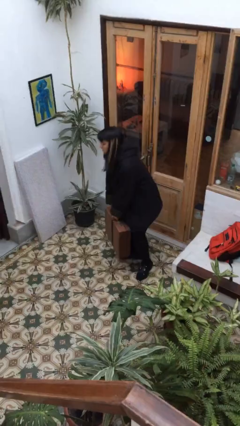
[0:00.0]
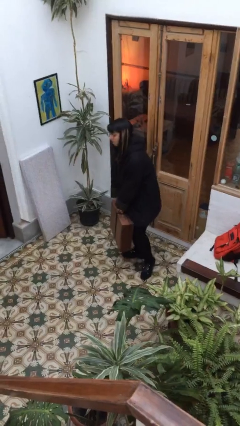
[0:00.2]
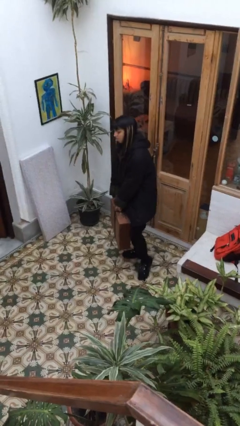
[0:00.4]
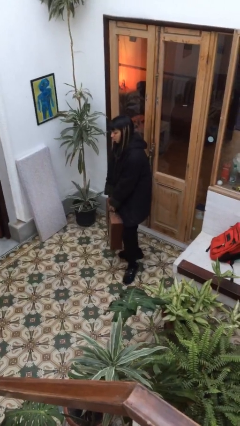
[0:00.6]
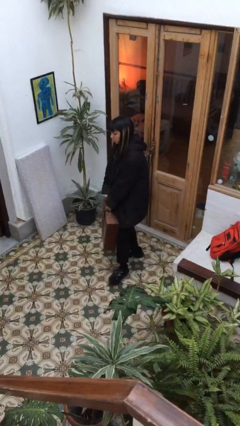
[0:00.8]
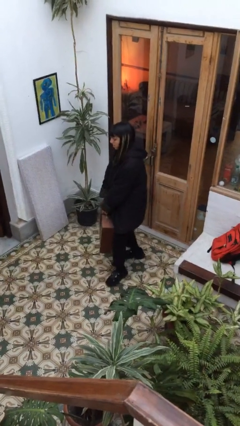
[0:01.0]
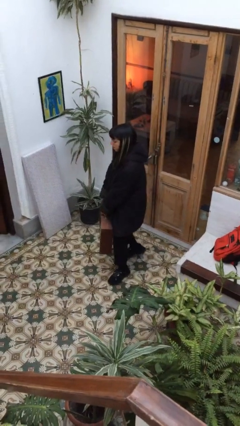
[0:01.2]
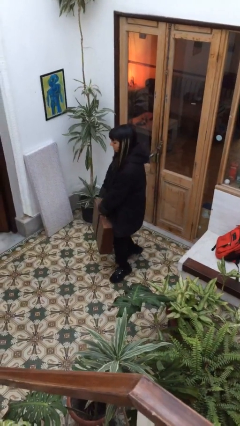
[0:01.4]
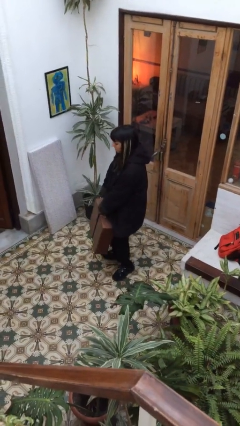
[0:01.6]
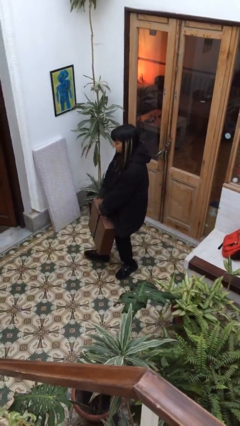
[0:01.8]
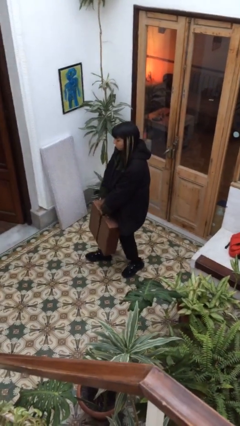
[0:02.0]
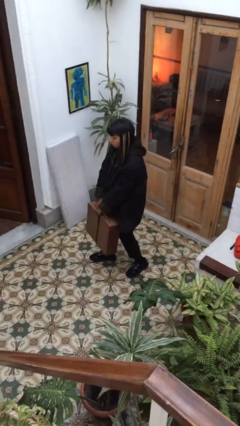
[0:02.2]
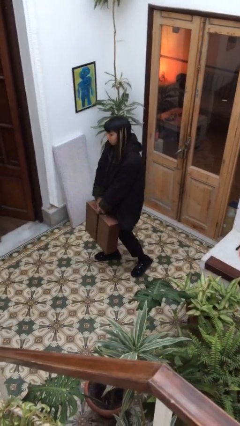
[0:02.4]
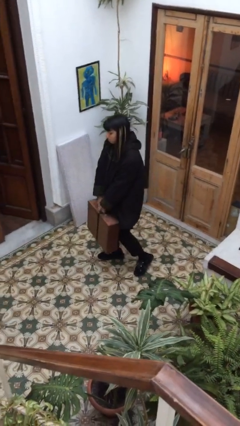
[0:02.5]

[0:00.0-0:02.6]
person carries heavy object

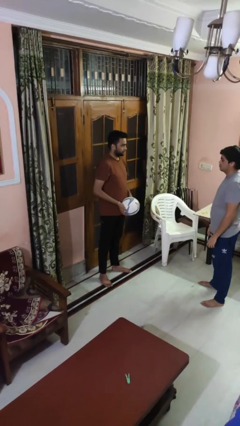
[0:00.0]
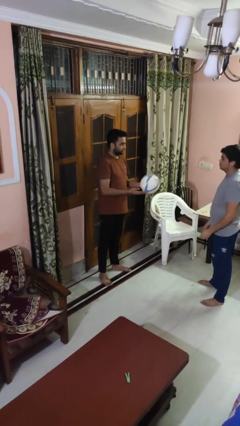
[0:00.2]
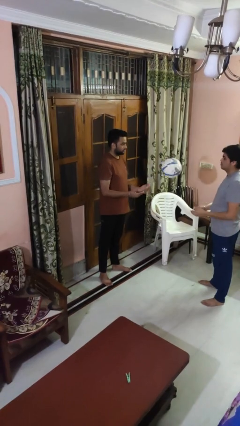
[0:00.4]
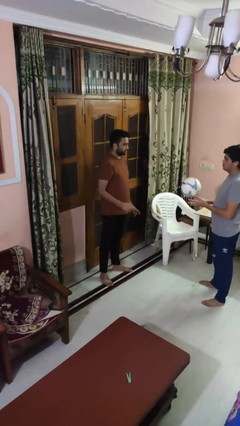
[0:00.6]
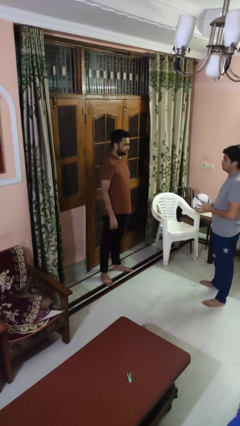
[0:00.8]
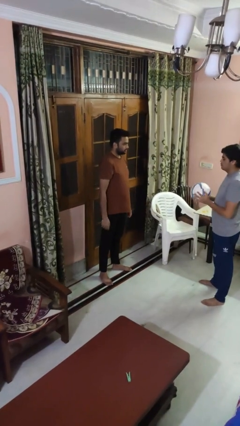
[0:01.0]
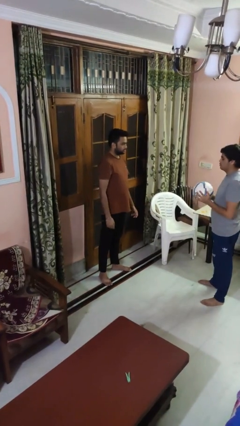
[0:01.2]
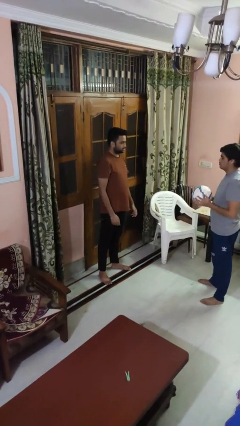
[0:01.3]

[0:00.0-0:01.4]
person throws object to person

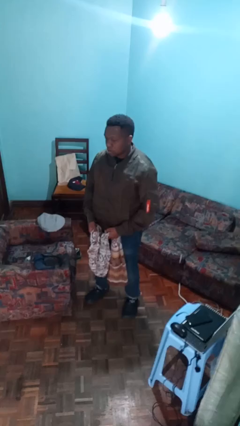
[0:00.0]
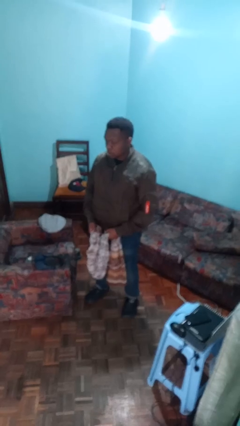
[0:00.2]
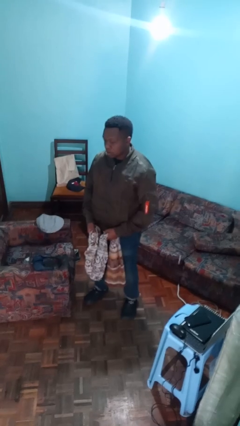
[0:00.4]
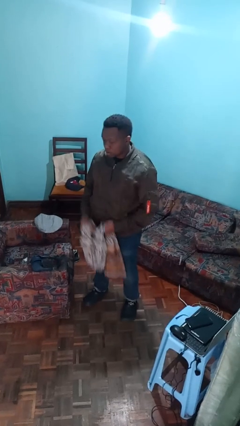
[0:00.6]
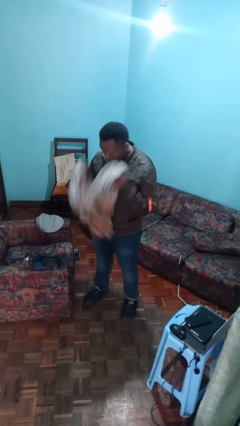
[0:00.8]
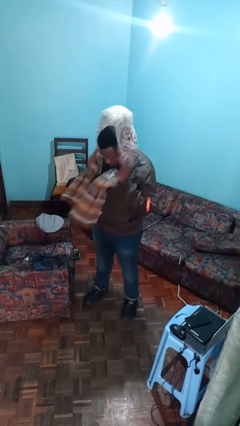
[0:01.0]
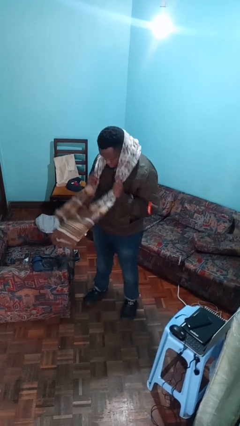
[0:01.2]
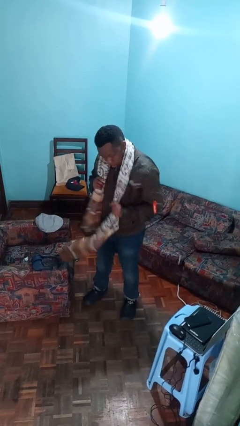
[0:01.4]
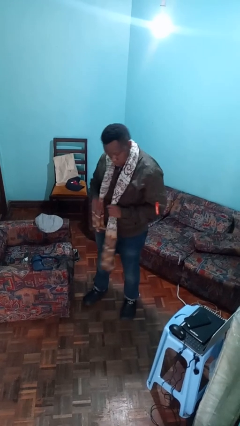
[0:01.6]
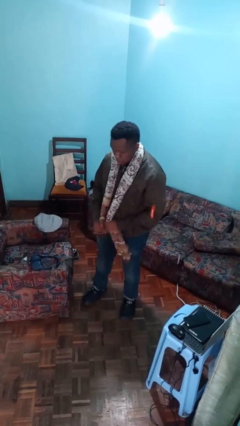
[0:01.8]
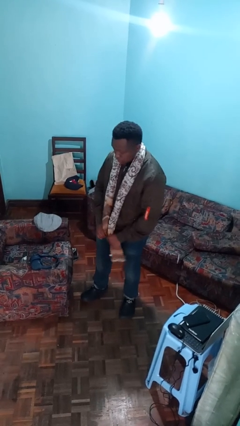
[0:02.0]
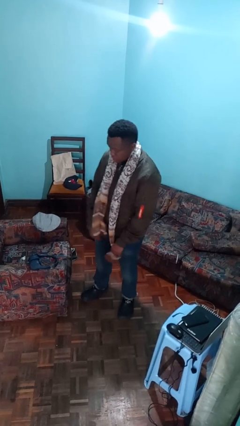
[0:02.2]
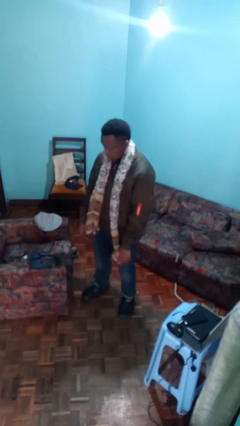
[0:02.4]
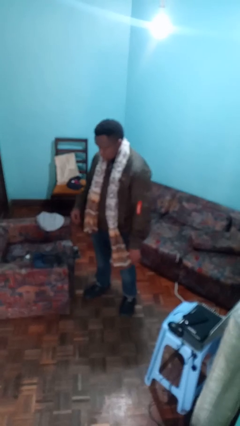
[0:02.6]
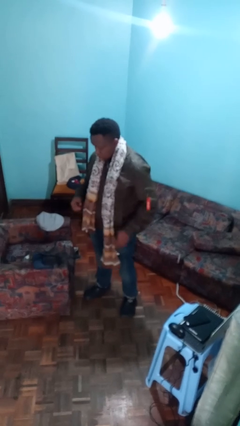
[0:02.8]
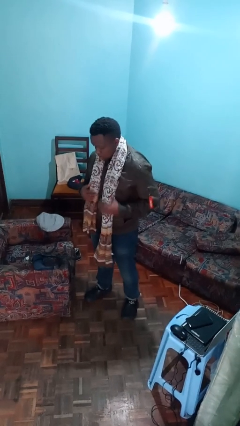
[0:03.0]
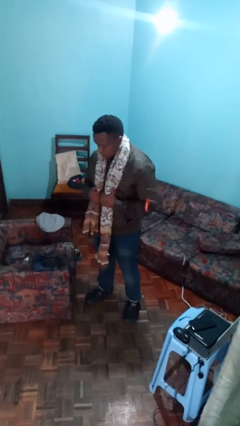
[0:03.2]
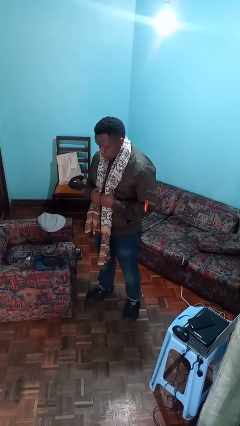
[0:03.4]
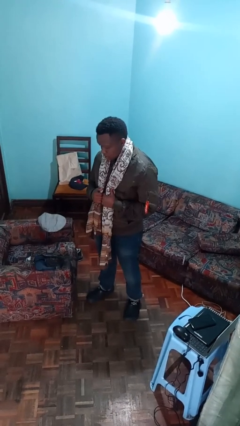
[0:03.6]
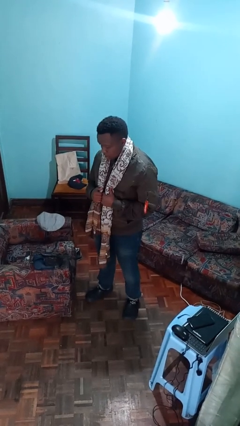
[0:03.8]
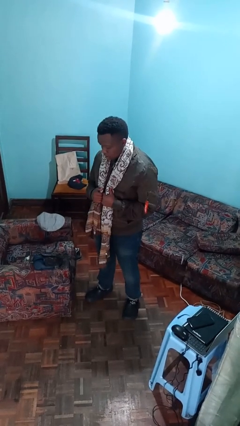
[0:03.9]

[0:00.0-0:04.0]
person puts on scarf

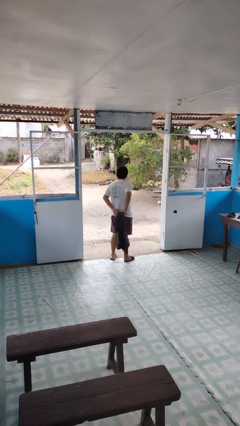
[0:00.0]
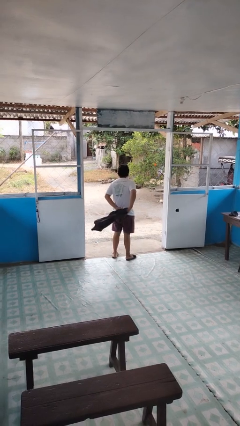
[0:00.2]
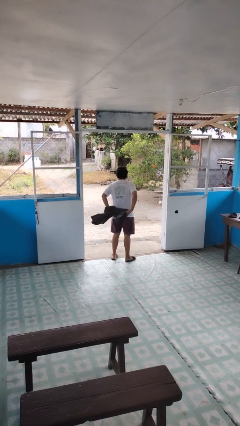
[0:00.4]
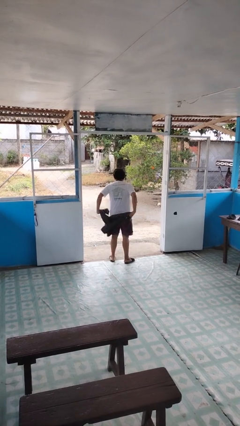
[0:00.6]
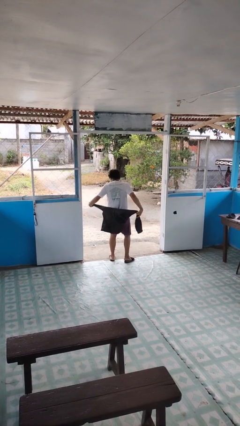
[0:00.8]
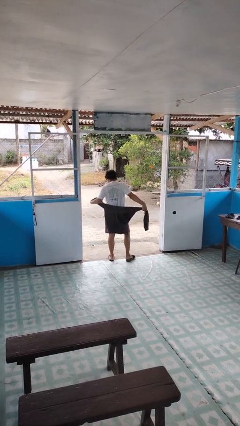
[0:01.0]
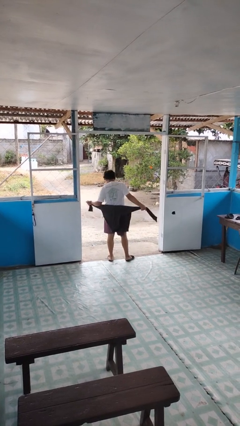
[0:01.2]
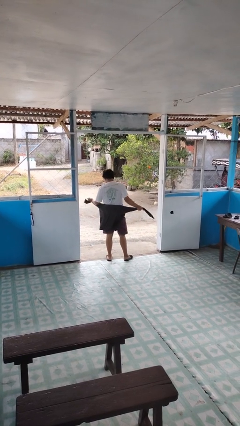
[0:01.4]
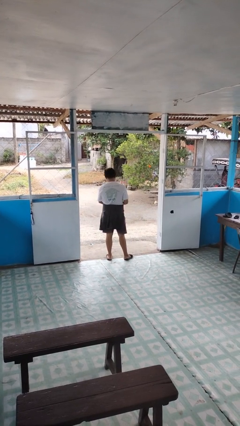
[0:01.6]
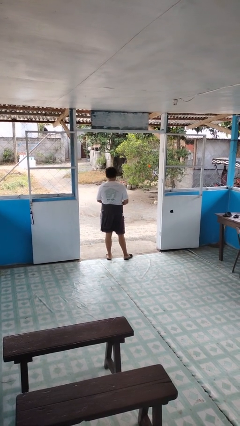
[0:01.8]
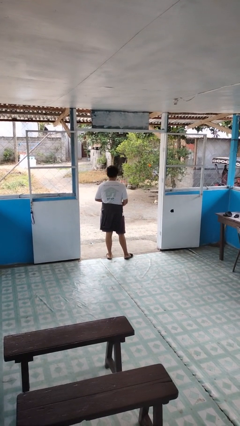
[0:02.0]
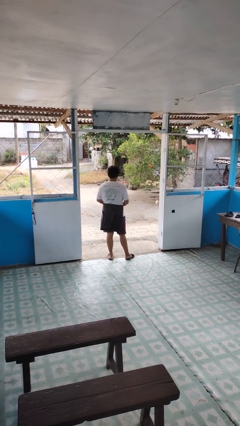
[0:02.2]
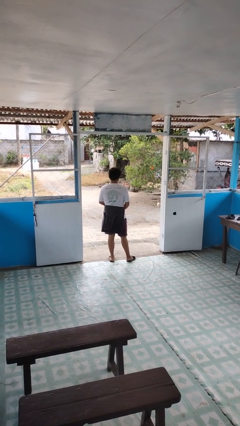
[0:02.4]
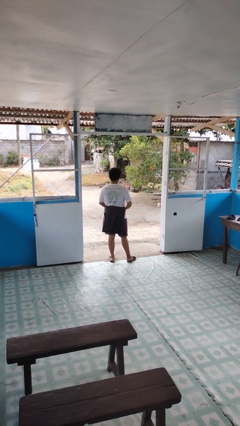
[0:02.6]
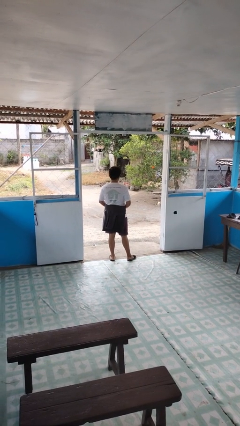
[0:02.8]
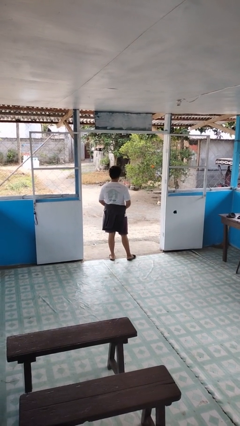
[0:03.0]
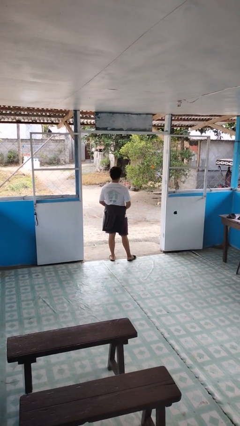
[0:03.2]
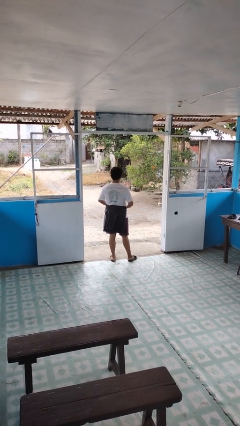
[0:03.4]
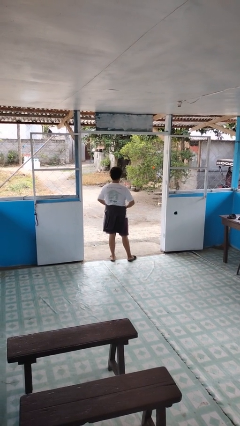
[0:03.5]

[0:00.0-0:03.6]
person ties jacket around waist

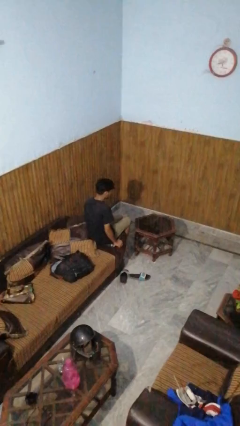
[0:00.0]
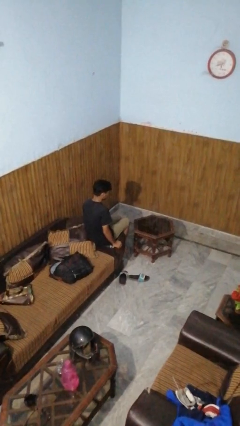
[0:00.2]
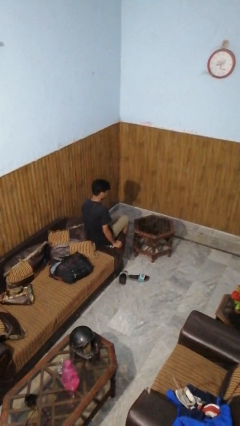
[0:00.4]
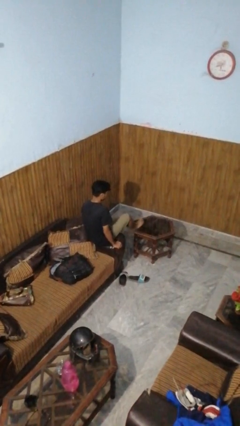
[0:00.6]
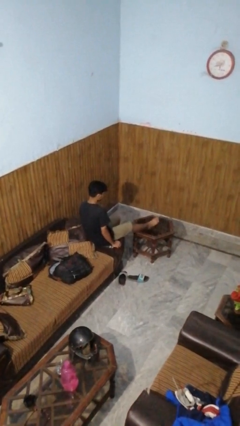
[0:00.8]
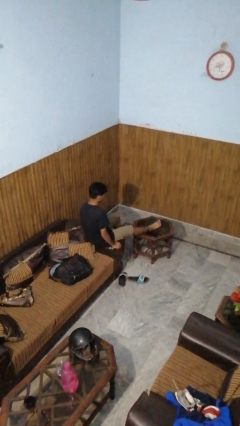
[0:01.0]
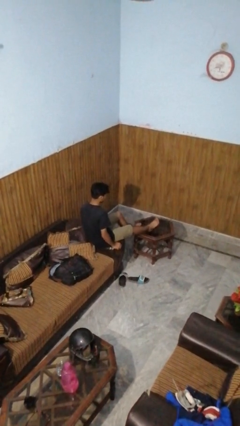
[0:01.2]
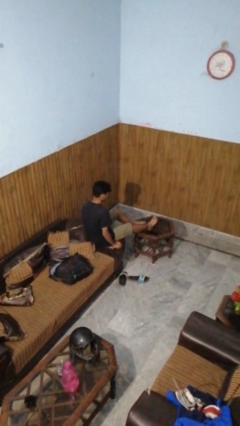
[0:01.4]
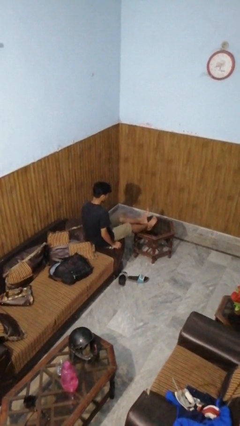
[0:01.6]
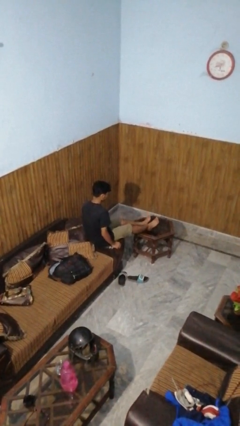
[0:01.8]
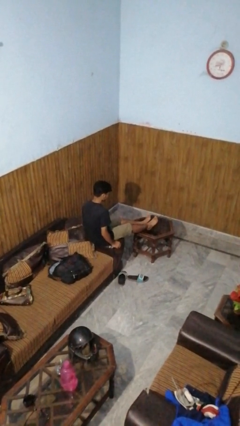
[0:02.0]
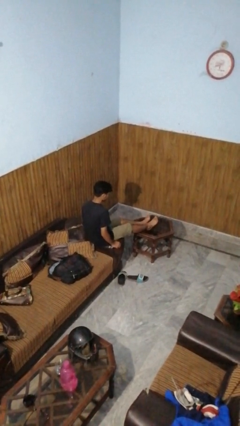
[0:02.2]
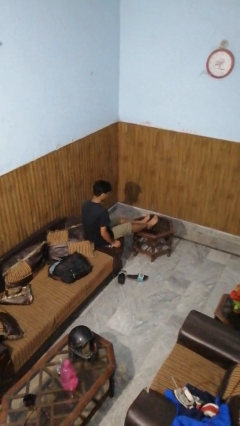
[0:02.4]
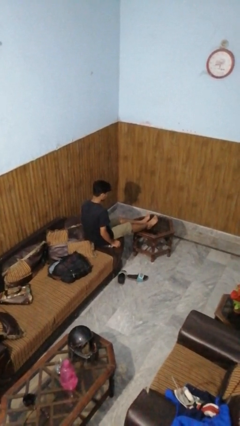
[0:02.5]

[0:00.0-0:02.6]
person puts feet up

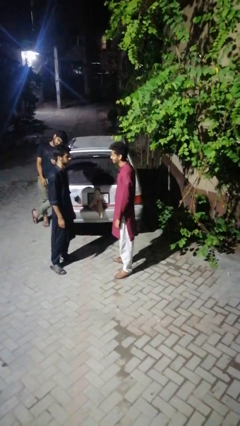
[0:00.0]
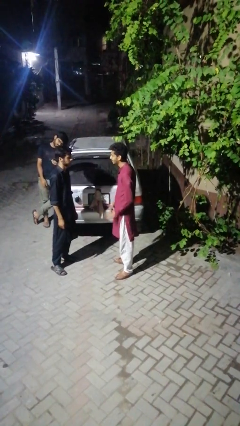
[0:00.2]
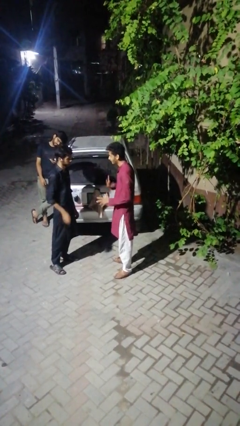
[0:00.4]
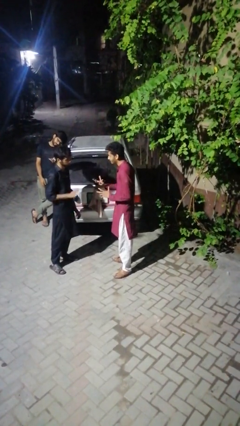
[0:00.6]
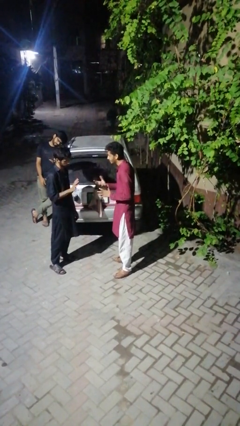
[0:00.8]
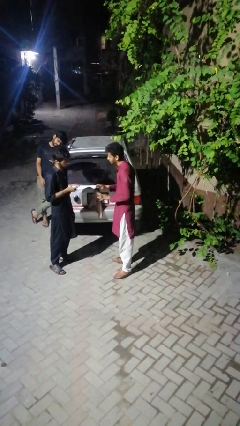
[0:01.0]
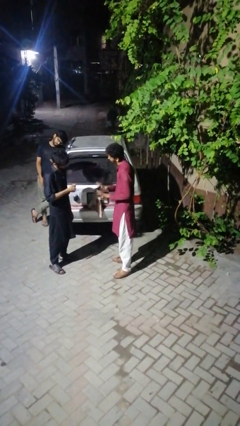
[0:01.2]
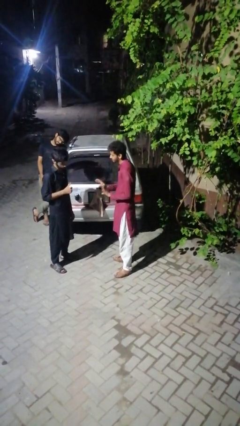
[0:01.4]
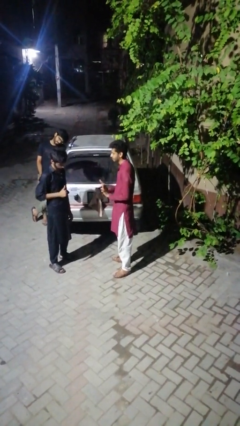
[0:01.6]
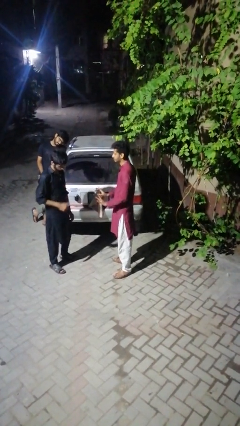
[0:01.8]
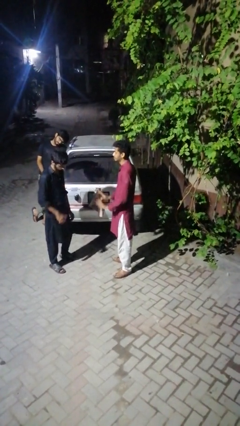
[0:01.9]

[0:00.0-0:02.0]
person talks to person

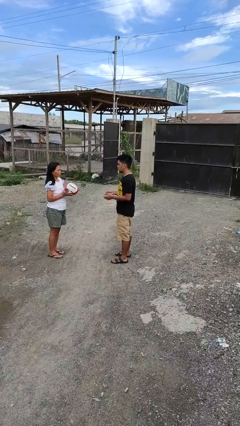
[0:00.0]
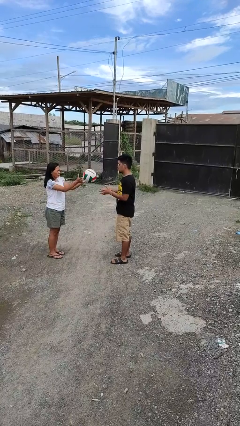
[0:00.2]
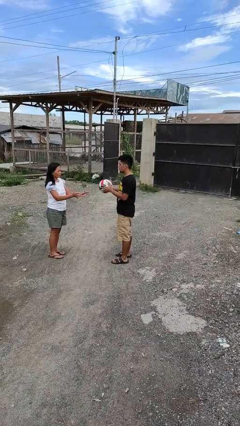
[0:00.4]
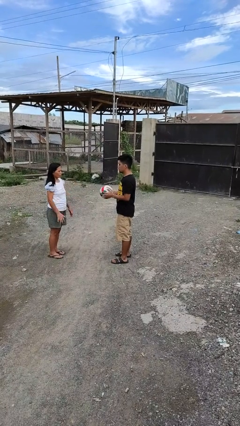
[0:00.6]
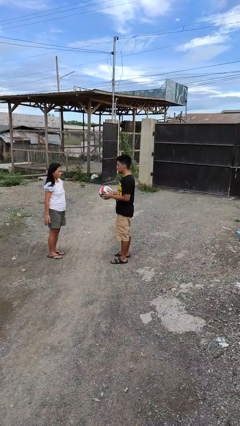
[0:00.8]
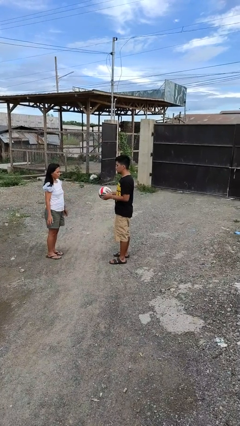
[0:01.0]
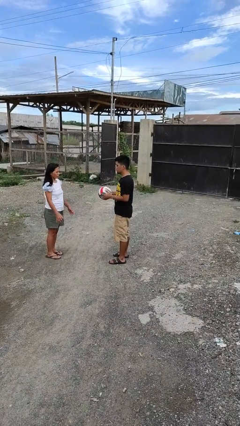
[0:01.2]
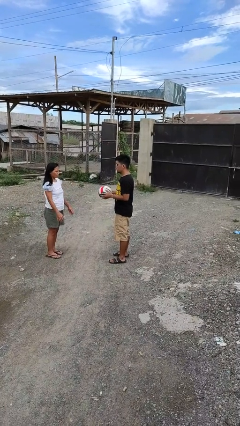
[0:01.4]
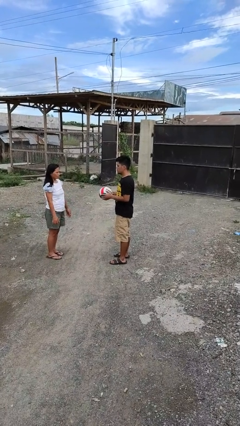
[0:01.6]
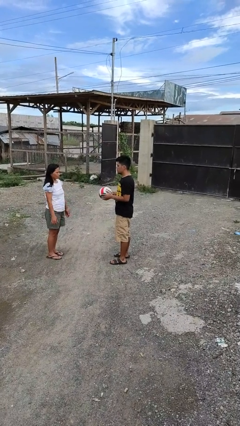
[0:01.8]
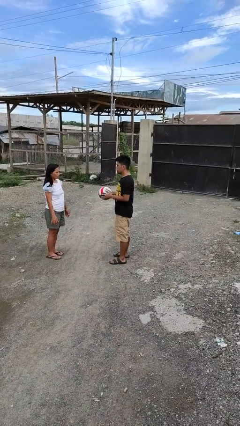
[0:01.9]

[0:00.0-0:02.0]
person catches object from person
